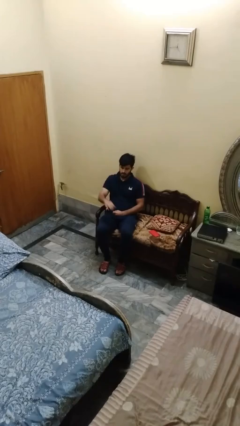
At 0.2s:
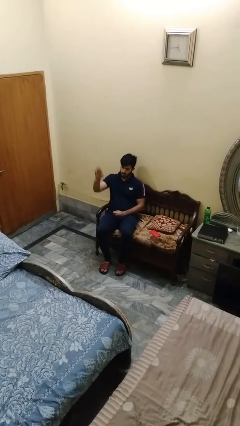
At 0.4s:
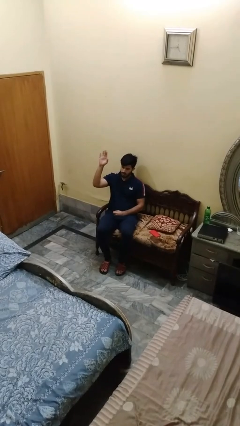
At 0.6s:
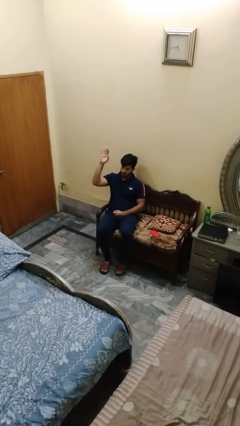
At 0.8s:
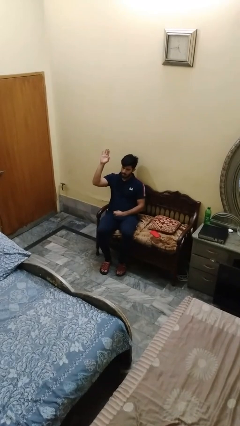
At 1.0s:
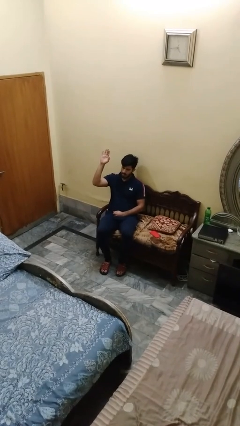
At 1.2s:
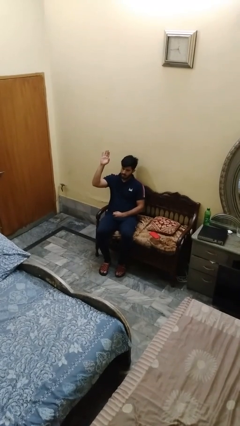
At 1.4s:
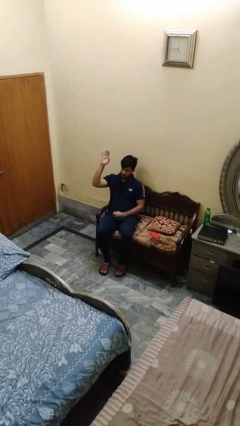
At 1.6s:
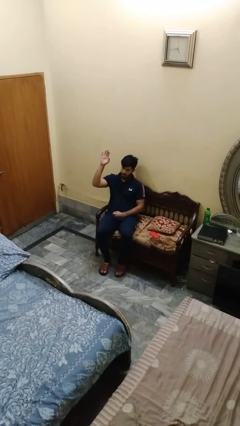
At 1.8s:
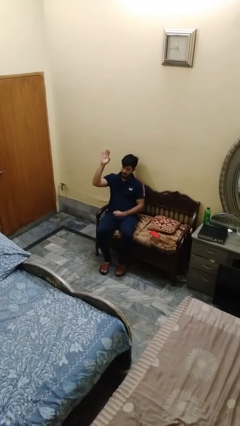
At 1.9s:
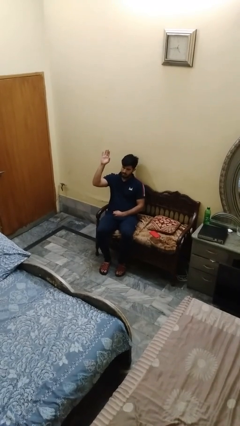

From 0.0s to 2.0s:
person gestures raise hand

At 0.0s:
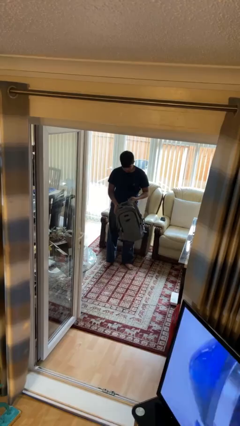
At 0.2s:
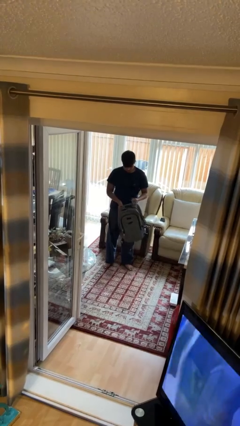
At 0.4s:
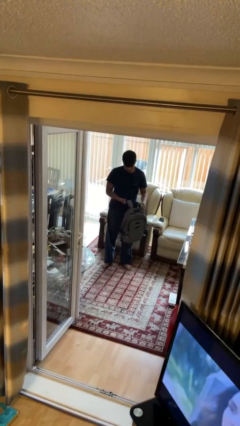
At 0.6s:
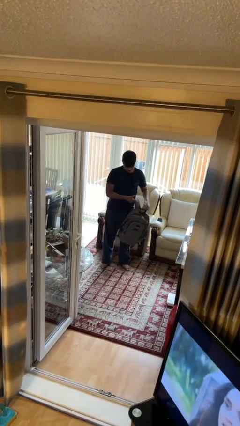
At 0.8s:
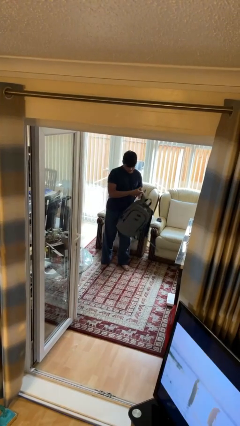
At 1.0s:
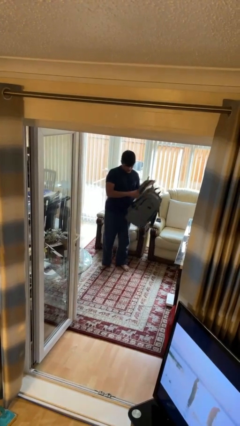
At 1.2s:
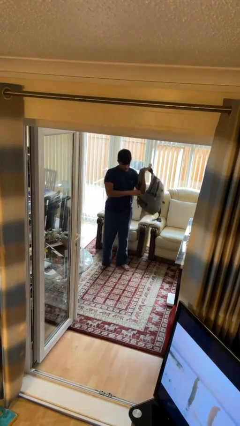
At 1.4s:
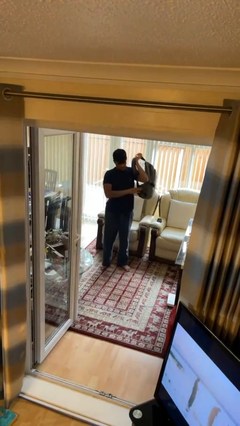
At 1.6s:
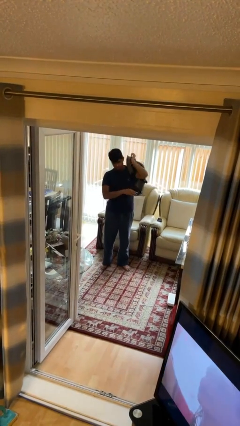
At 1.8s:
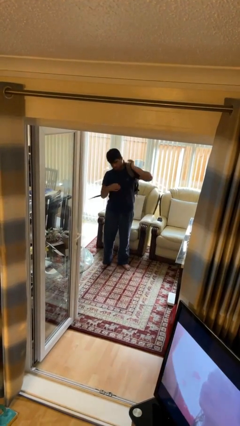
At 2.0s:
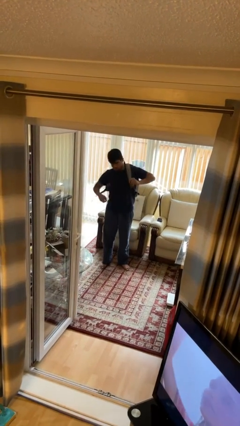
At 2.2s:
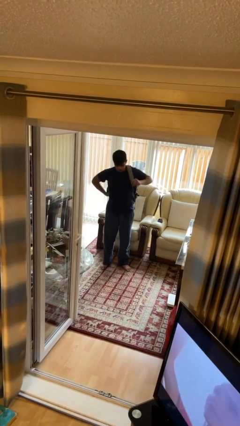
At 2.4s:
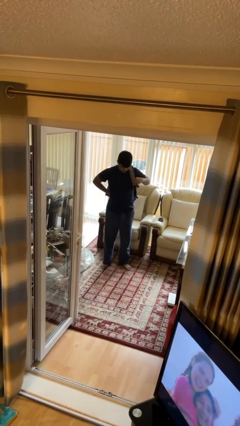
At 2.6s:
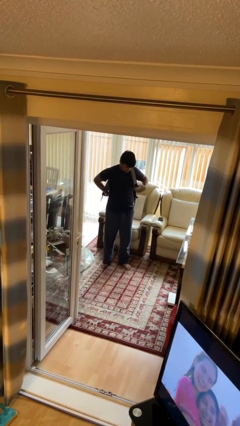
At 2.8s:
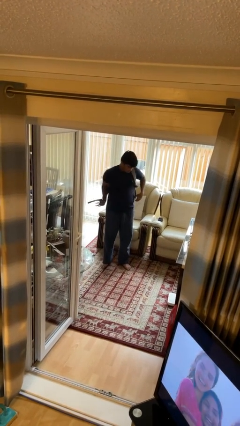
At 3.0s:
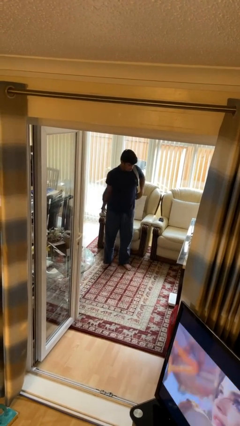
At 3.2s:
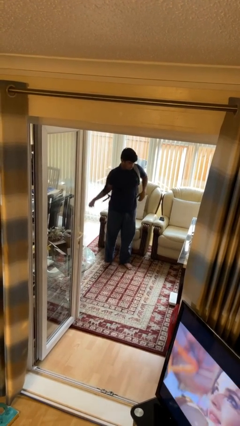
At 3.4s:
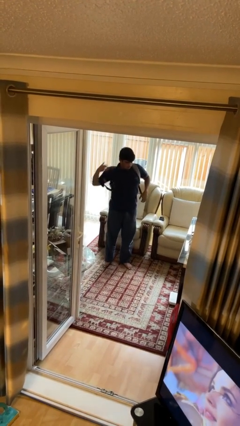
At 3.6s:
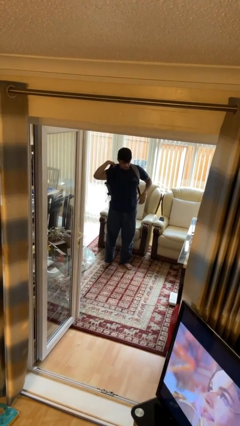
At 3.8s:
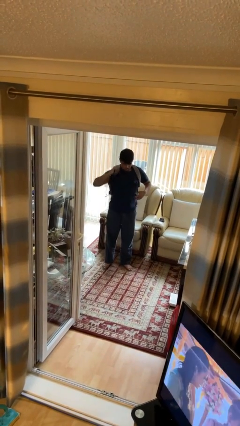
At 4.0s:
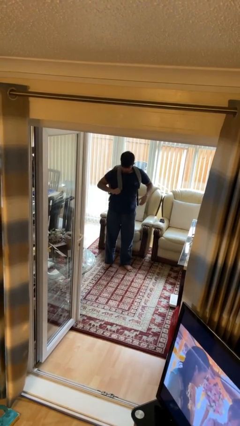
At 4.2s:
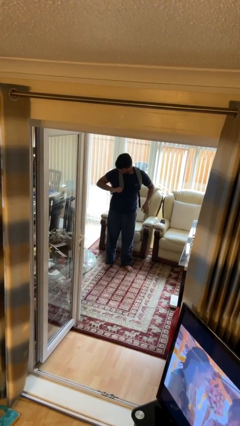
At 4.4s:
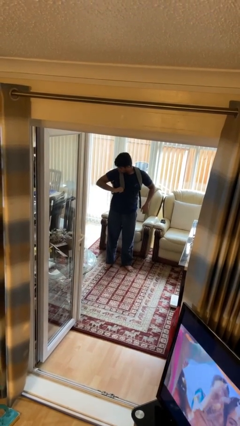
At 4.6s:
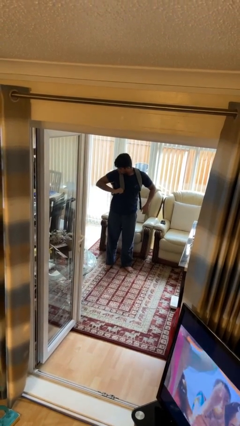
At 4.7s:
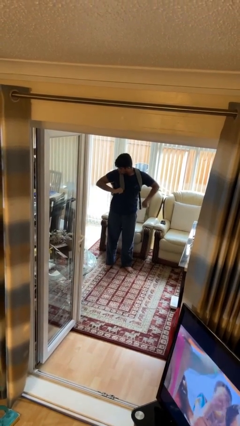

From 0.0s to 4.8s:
person puts on backpack

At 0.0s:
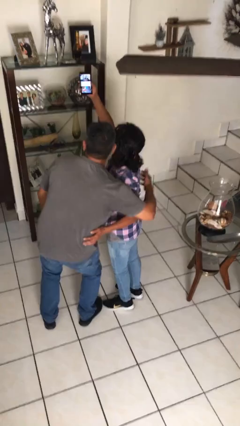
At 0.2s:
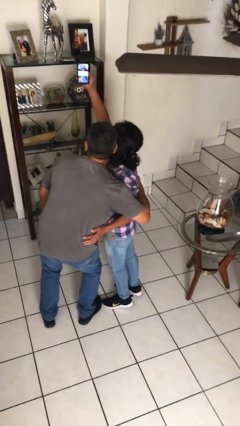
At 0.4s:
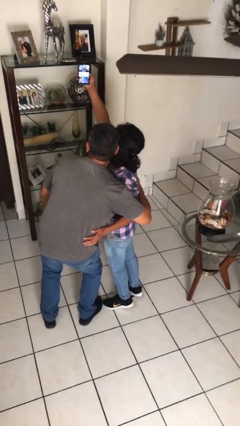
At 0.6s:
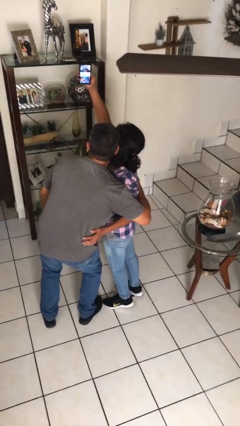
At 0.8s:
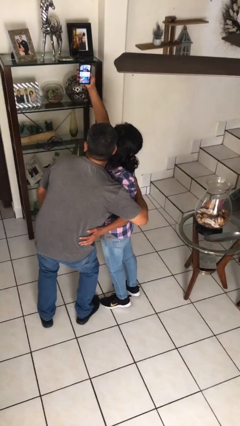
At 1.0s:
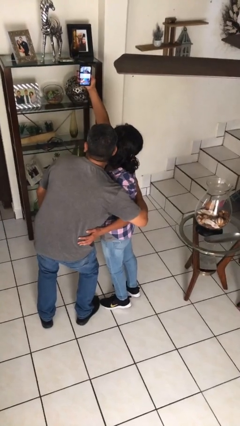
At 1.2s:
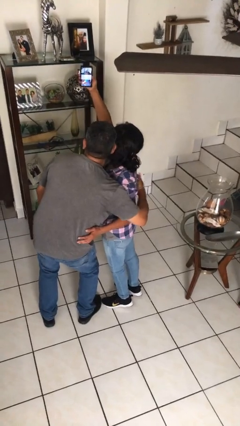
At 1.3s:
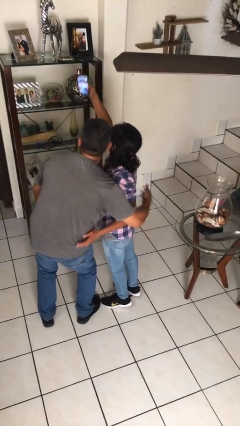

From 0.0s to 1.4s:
person takes selfie with person

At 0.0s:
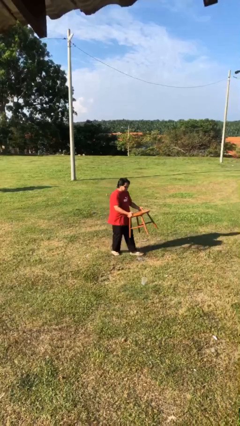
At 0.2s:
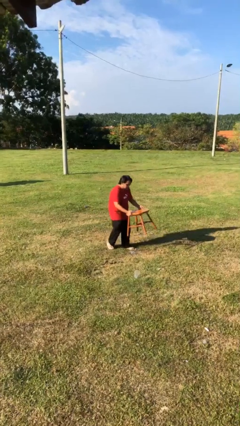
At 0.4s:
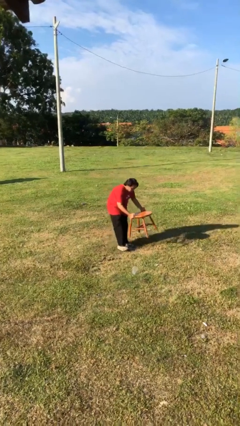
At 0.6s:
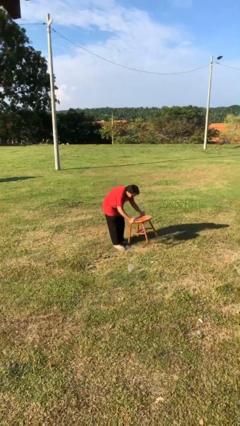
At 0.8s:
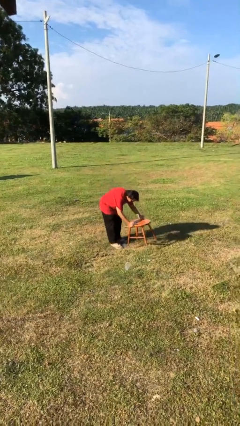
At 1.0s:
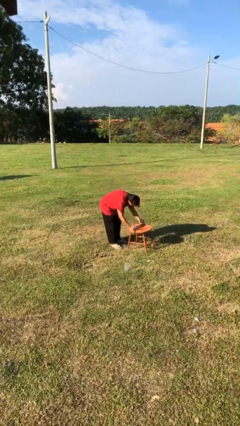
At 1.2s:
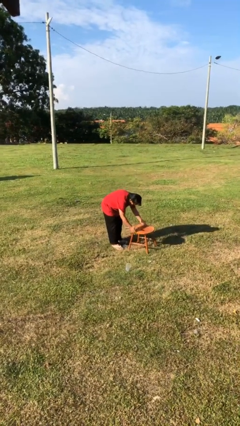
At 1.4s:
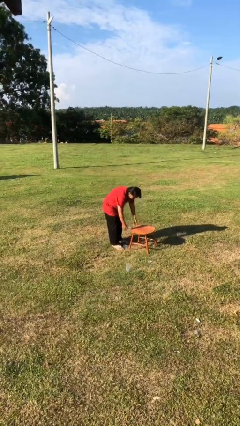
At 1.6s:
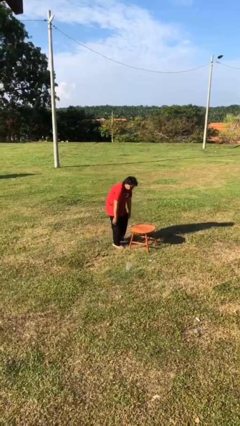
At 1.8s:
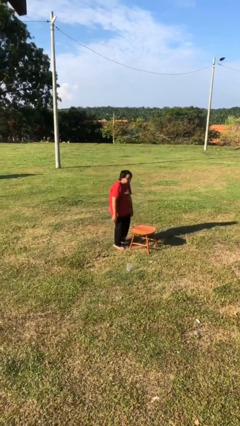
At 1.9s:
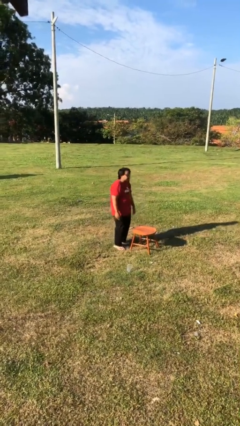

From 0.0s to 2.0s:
person puts down object on floor

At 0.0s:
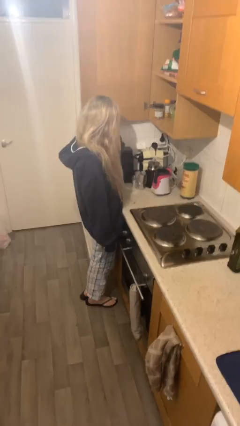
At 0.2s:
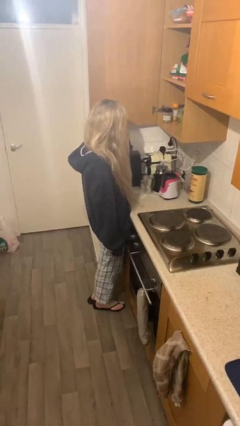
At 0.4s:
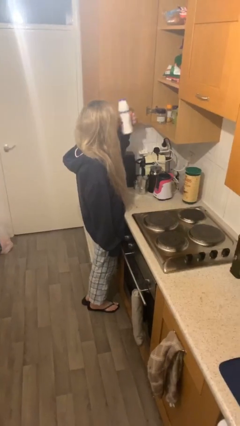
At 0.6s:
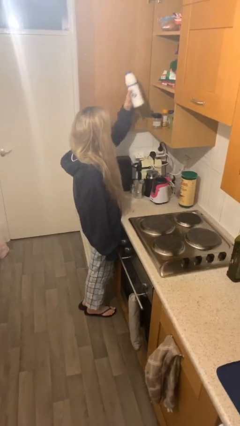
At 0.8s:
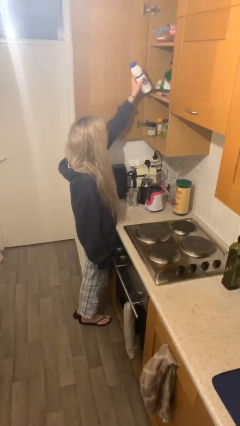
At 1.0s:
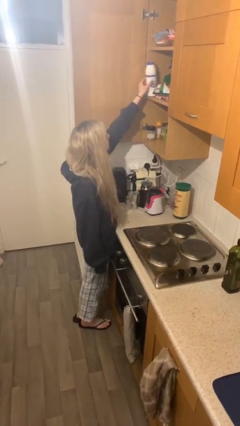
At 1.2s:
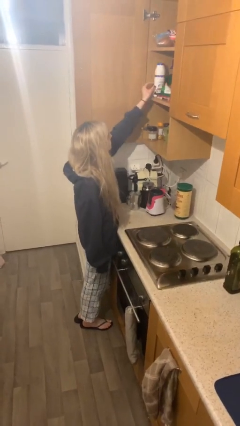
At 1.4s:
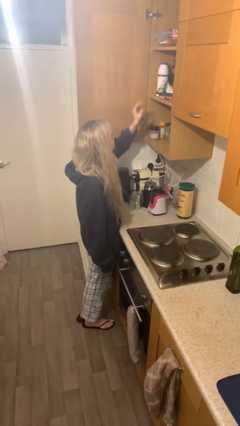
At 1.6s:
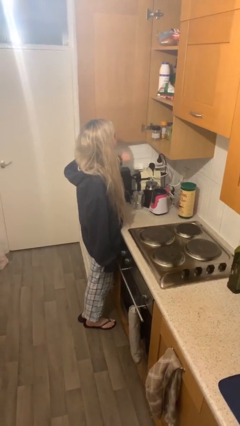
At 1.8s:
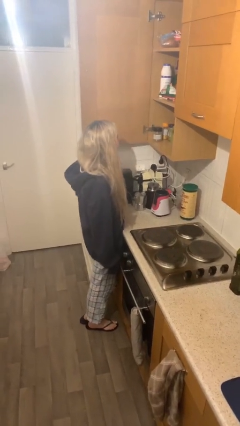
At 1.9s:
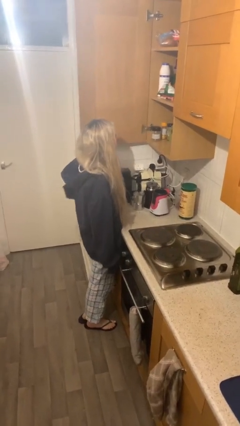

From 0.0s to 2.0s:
person puts down object on shelf

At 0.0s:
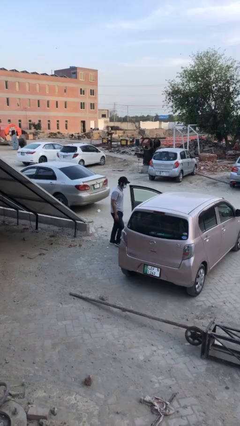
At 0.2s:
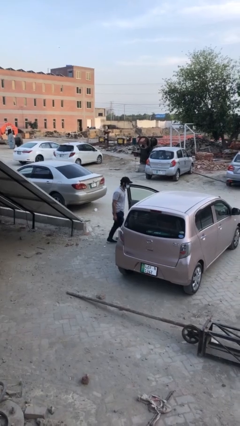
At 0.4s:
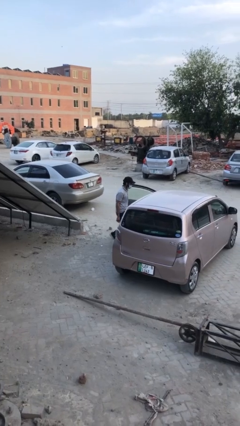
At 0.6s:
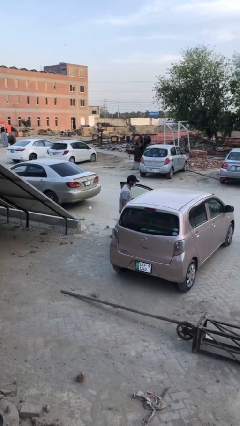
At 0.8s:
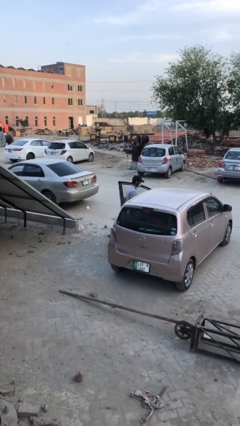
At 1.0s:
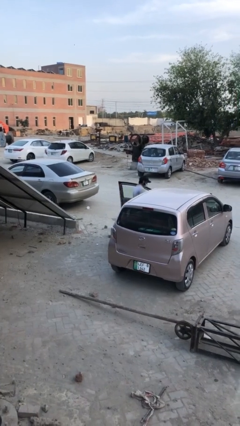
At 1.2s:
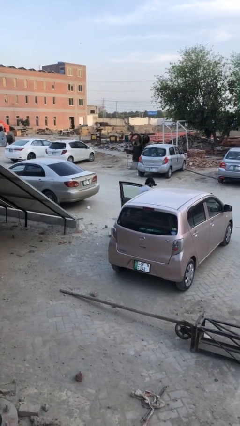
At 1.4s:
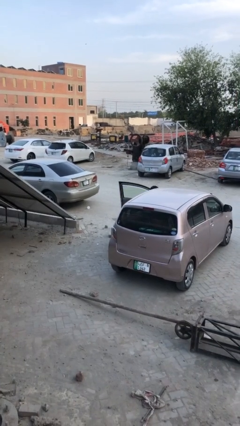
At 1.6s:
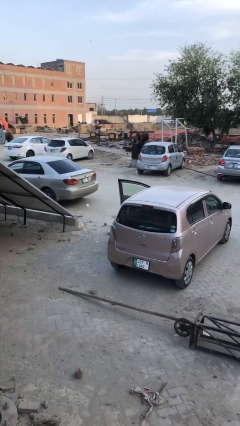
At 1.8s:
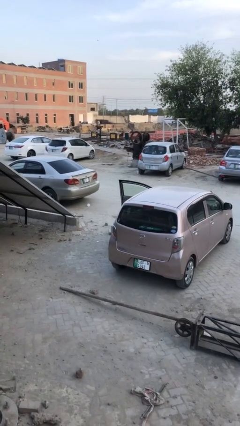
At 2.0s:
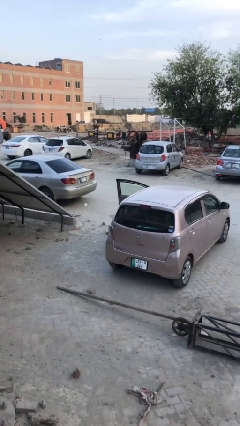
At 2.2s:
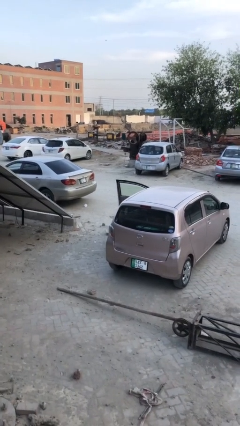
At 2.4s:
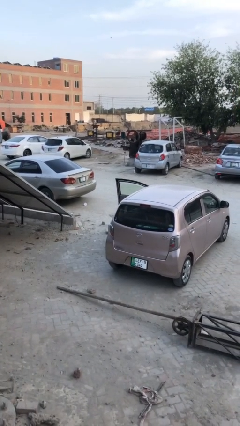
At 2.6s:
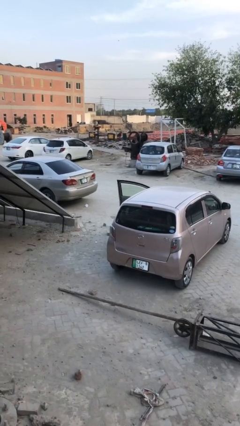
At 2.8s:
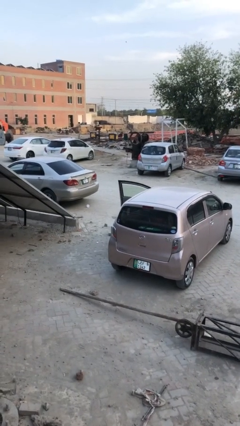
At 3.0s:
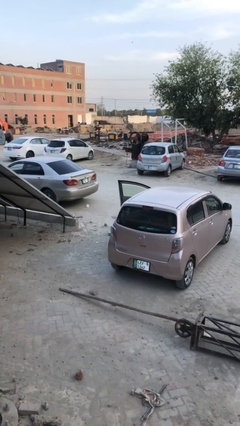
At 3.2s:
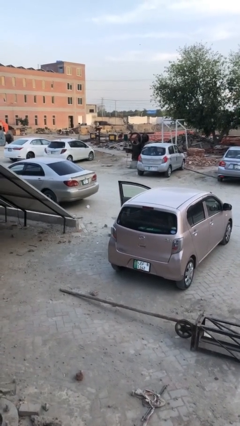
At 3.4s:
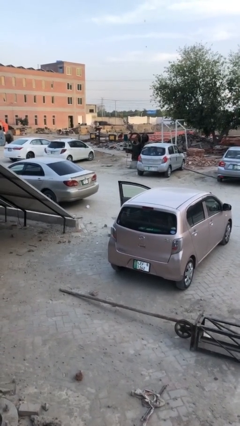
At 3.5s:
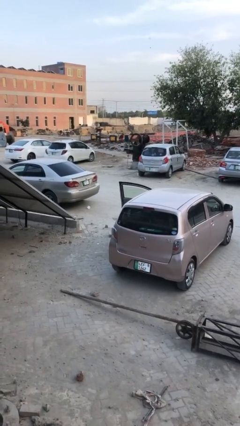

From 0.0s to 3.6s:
person enters car

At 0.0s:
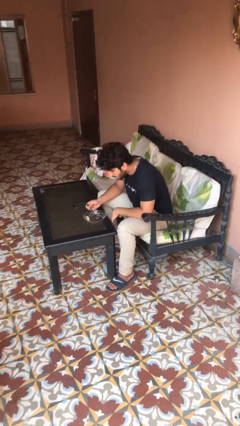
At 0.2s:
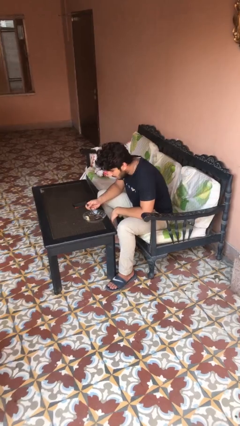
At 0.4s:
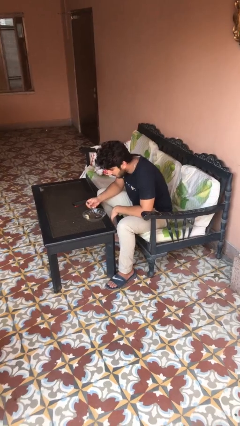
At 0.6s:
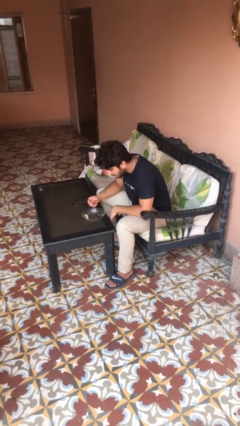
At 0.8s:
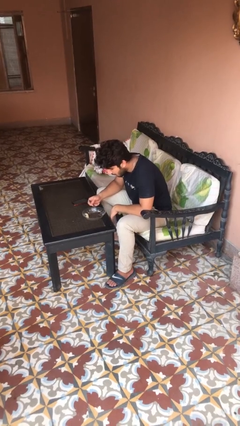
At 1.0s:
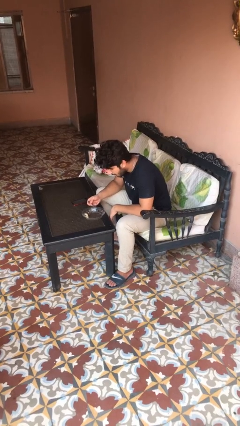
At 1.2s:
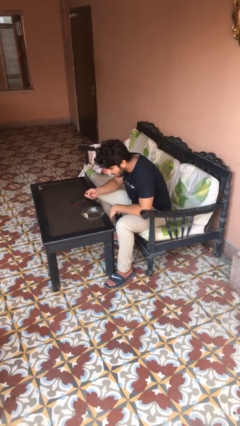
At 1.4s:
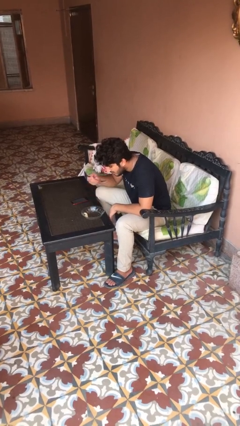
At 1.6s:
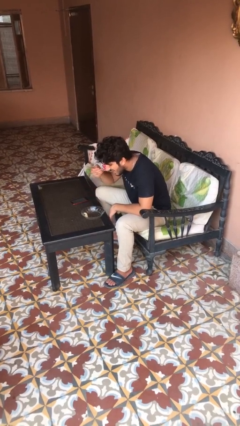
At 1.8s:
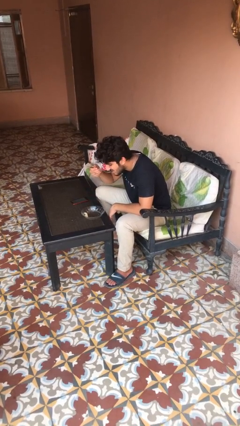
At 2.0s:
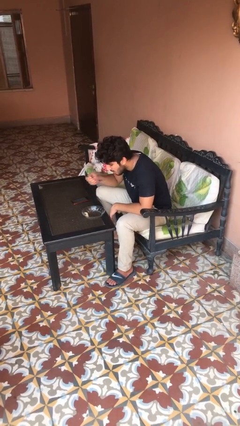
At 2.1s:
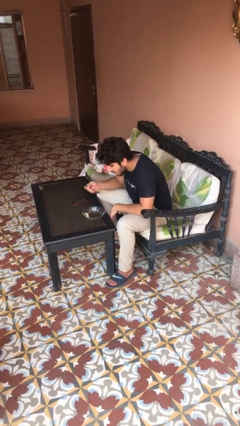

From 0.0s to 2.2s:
person eats with utensil
